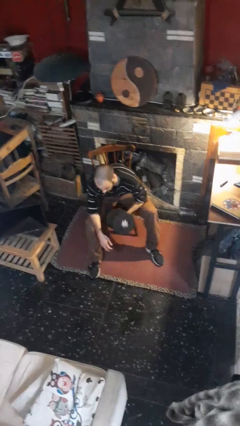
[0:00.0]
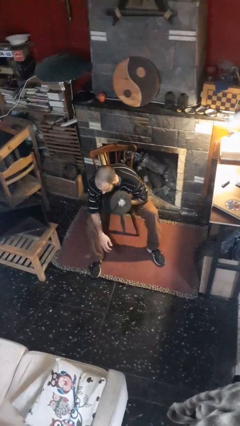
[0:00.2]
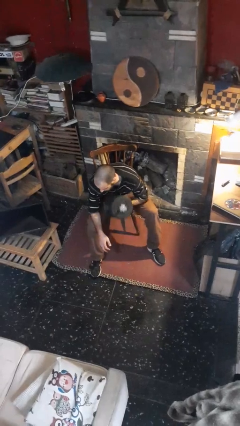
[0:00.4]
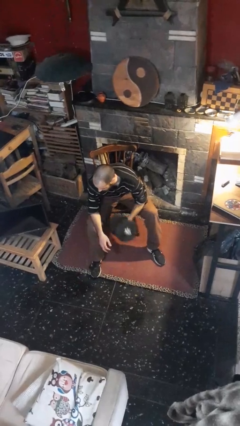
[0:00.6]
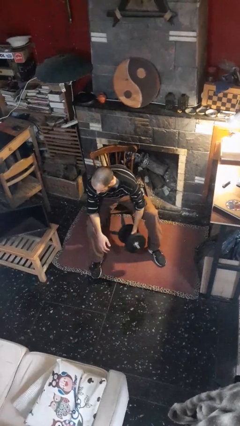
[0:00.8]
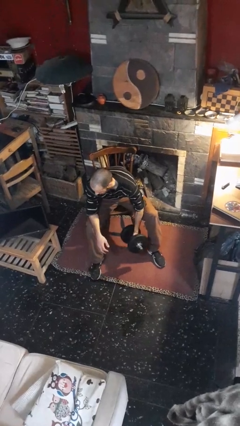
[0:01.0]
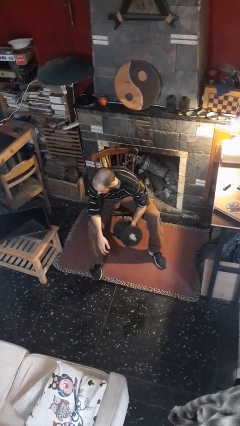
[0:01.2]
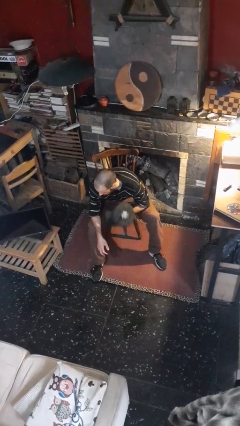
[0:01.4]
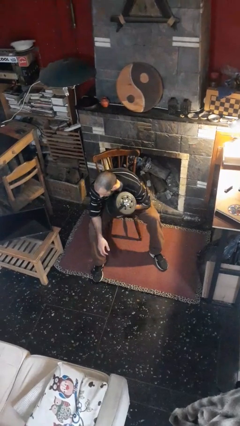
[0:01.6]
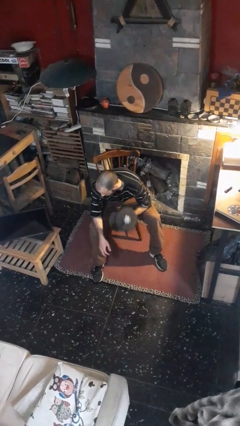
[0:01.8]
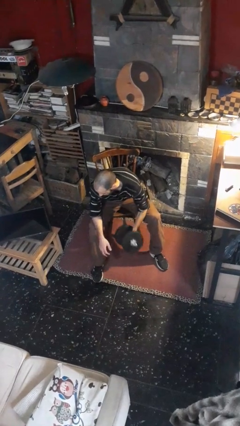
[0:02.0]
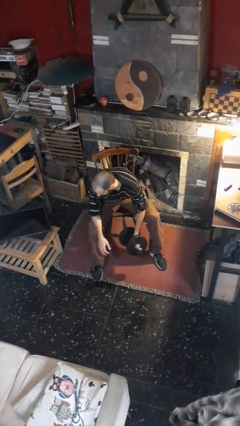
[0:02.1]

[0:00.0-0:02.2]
person lifts dumbbells

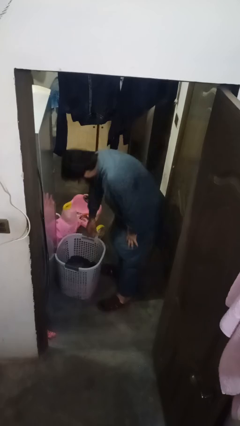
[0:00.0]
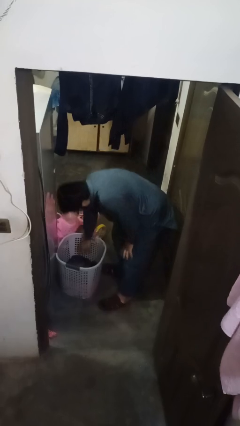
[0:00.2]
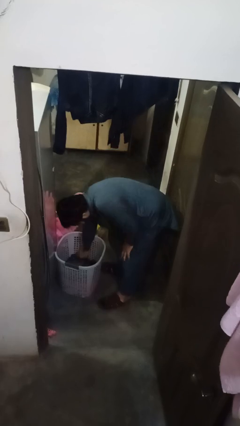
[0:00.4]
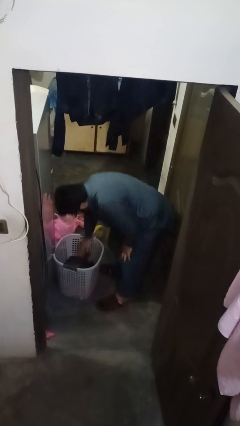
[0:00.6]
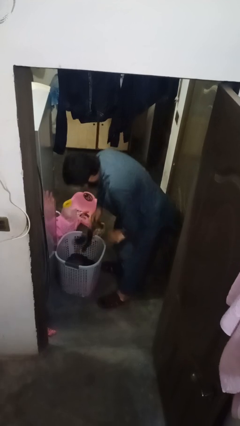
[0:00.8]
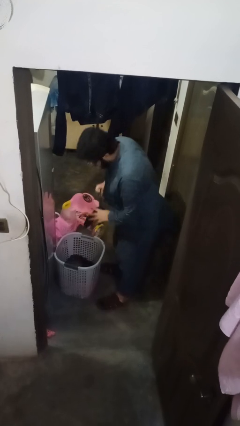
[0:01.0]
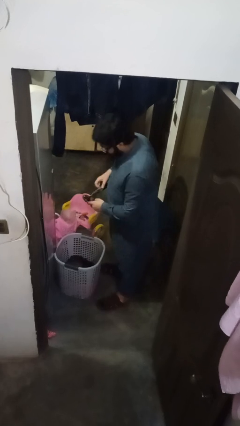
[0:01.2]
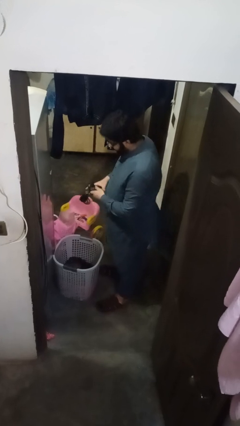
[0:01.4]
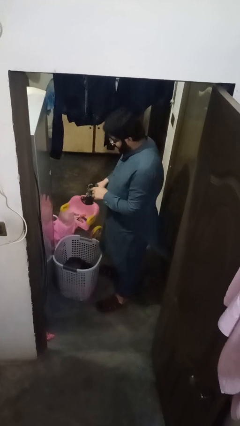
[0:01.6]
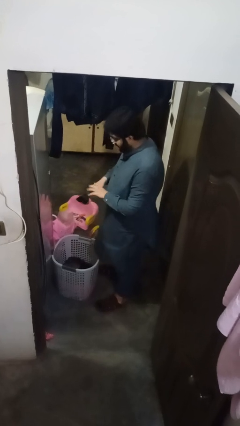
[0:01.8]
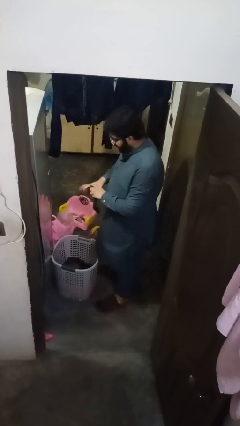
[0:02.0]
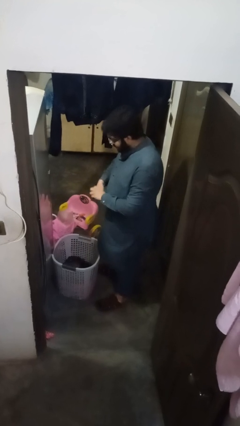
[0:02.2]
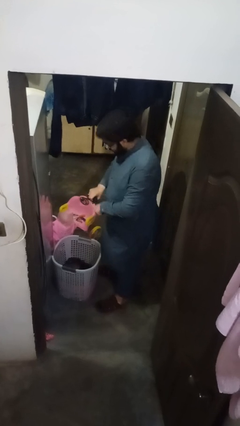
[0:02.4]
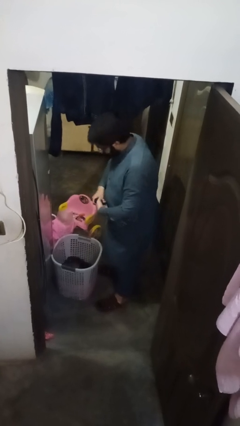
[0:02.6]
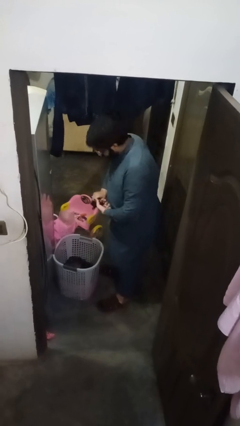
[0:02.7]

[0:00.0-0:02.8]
person folds socks

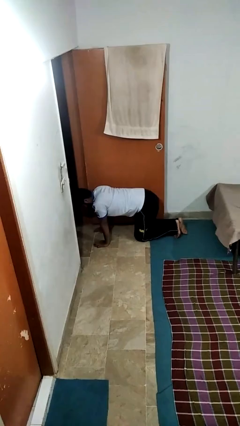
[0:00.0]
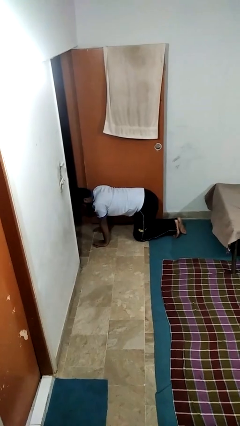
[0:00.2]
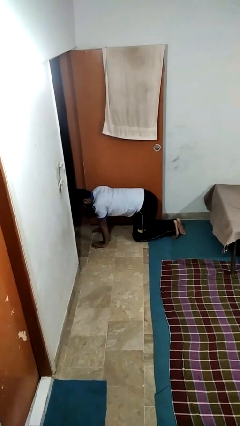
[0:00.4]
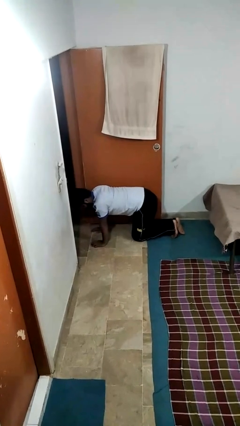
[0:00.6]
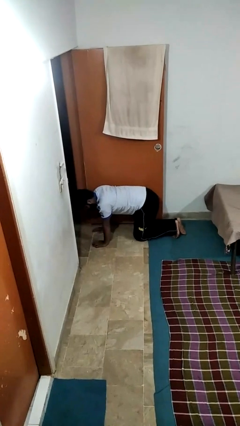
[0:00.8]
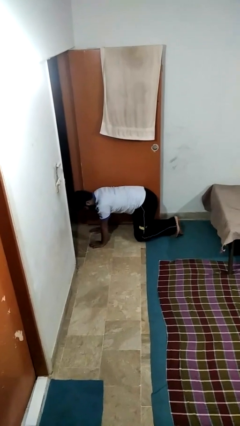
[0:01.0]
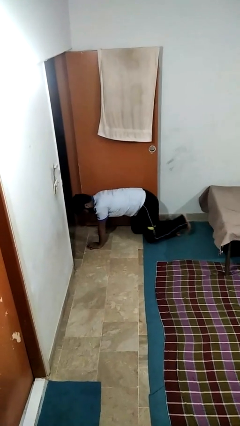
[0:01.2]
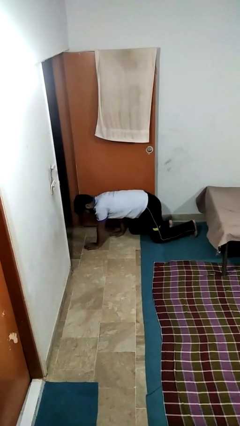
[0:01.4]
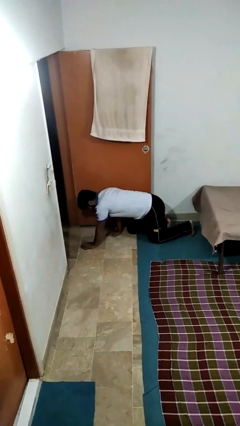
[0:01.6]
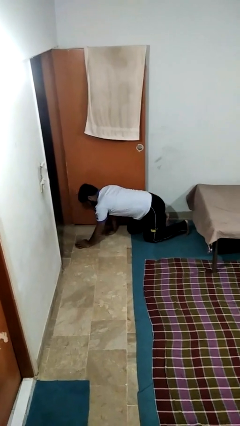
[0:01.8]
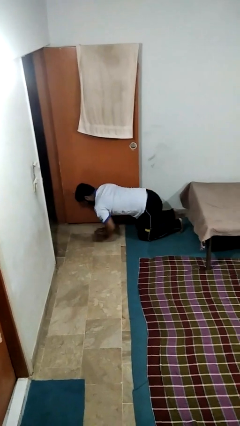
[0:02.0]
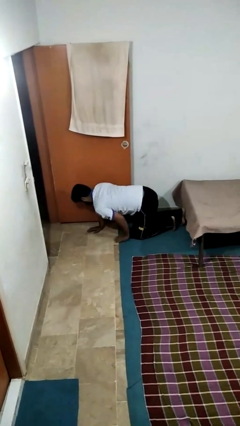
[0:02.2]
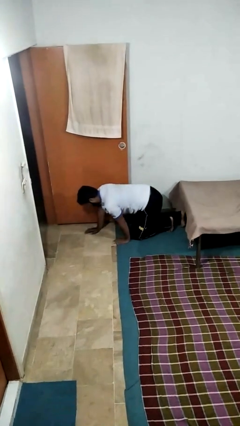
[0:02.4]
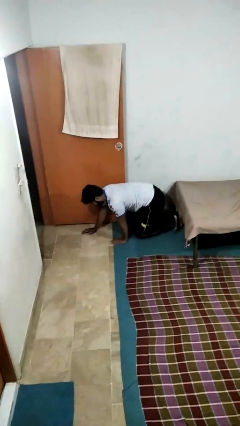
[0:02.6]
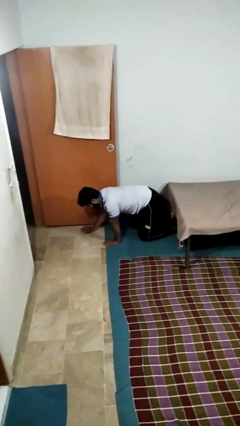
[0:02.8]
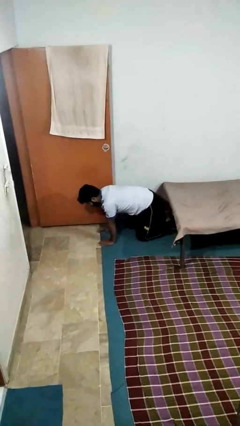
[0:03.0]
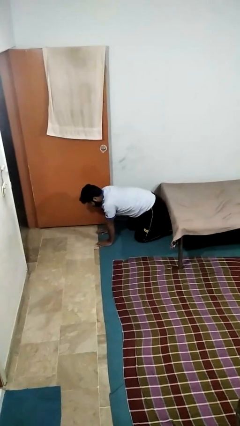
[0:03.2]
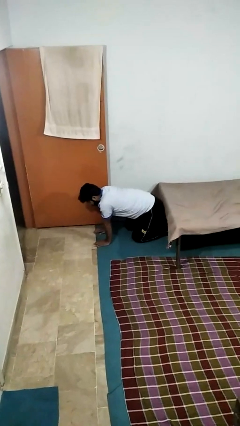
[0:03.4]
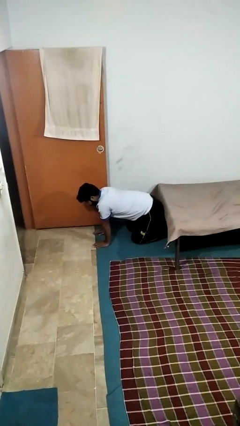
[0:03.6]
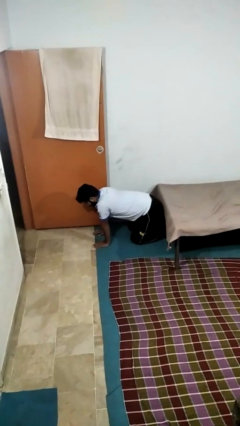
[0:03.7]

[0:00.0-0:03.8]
person crawls

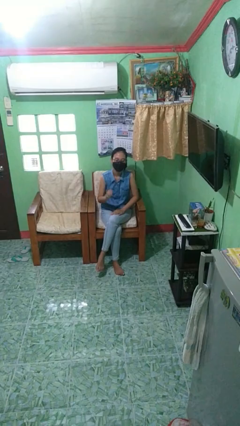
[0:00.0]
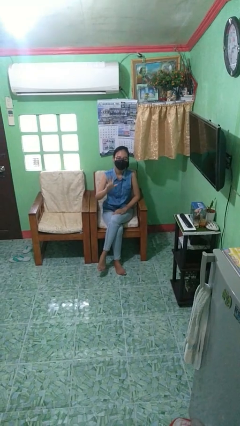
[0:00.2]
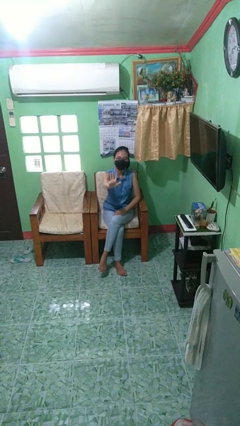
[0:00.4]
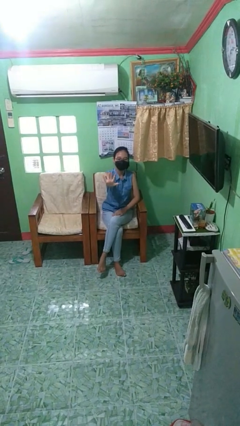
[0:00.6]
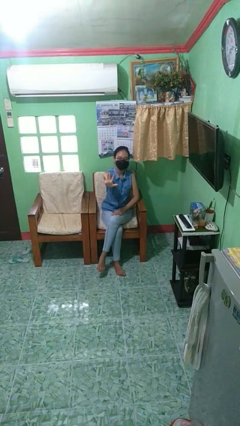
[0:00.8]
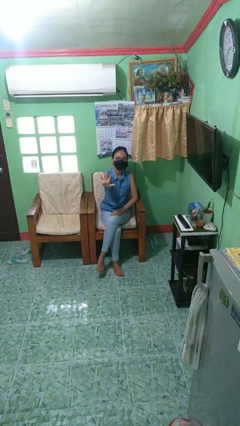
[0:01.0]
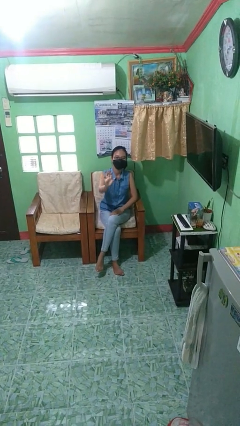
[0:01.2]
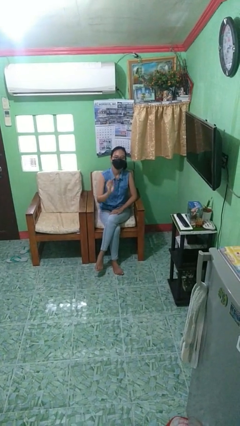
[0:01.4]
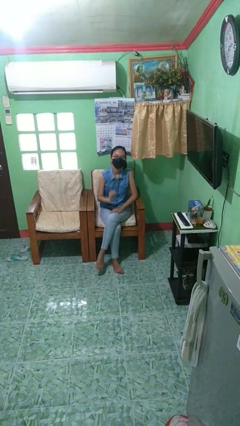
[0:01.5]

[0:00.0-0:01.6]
person gestures stop

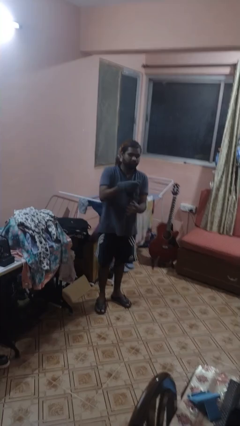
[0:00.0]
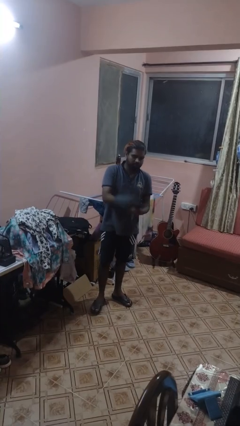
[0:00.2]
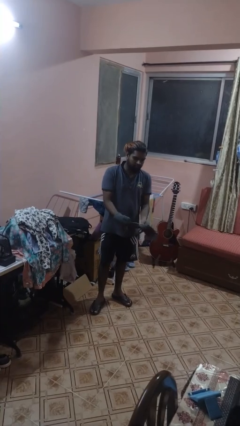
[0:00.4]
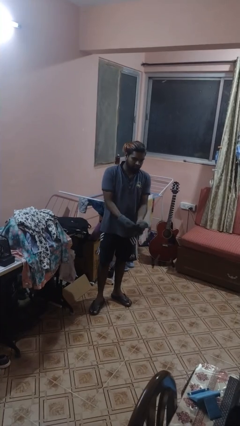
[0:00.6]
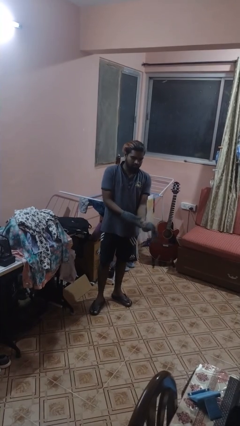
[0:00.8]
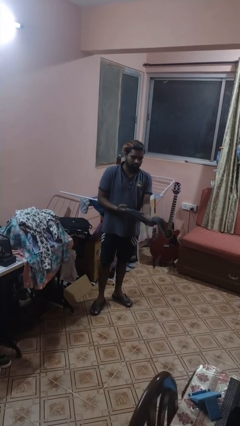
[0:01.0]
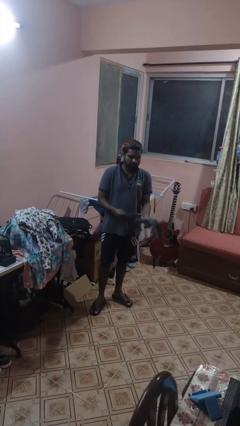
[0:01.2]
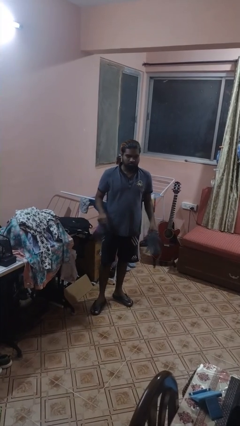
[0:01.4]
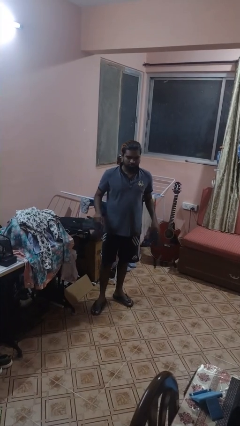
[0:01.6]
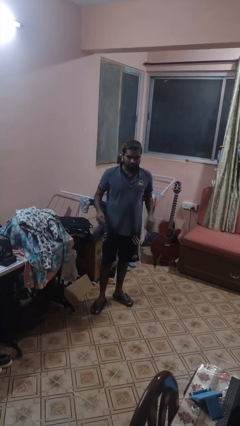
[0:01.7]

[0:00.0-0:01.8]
person takes off gloves

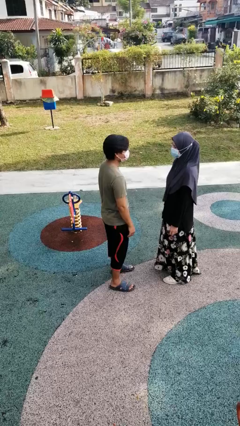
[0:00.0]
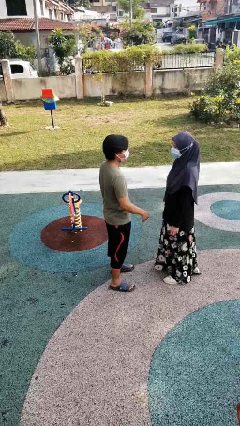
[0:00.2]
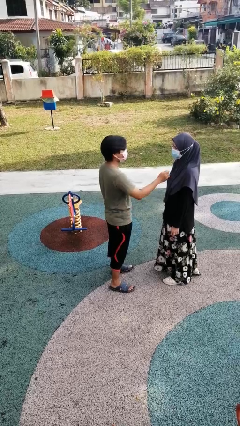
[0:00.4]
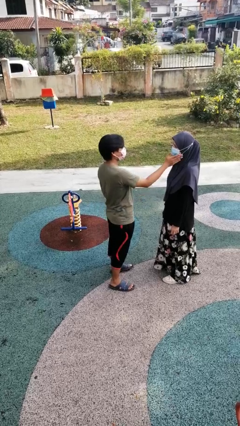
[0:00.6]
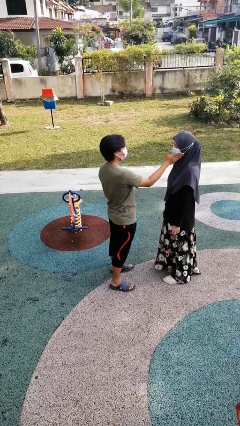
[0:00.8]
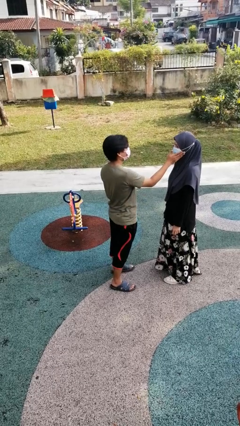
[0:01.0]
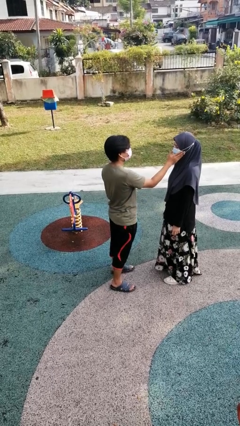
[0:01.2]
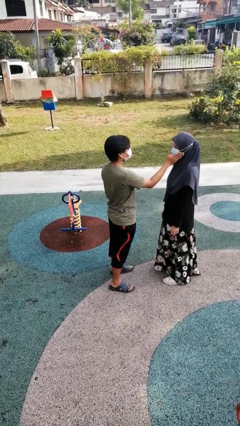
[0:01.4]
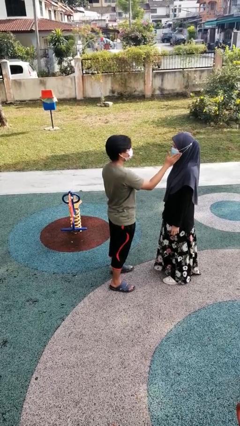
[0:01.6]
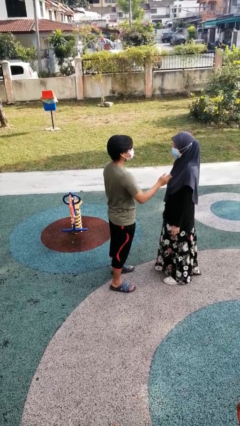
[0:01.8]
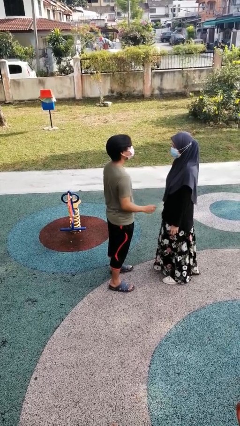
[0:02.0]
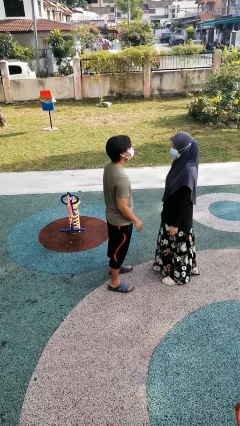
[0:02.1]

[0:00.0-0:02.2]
person touches face of person

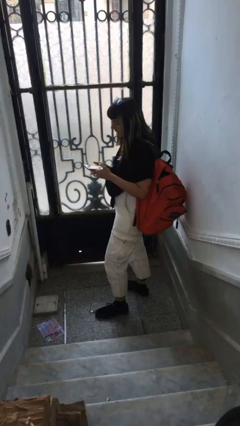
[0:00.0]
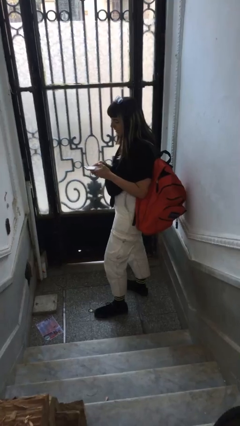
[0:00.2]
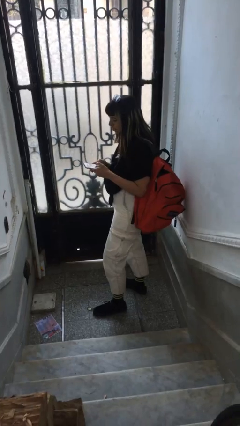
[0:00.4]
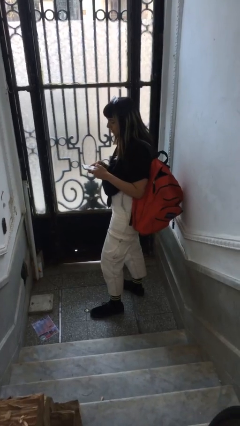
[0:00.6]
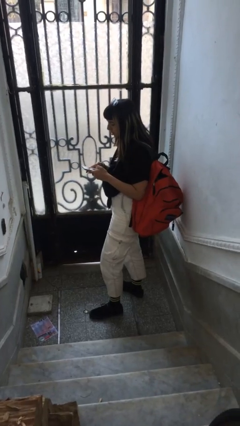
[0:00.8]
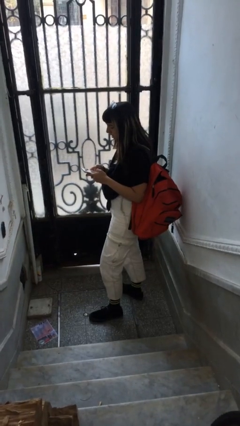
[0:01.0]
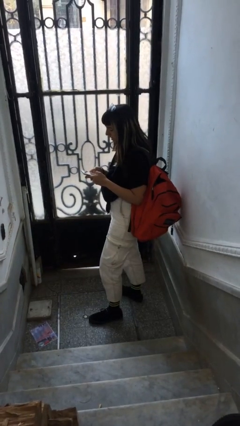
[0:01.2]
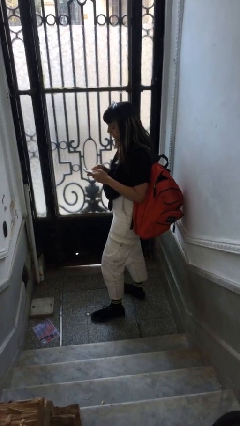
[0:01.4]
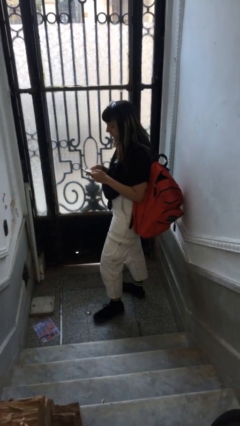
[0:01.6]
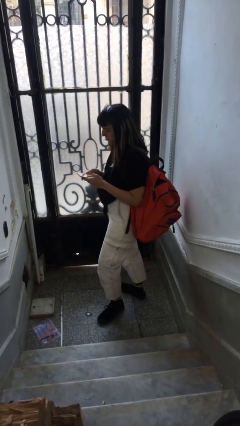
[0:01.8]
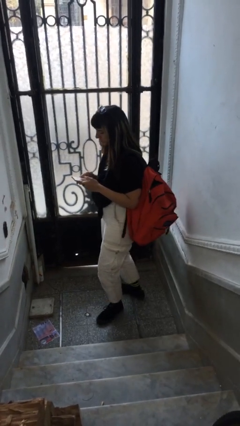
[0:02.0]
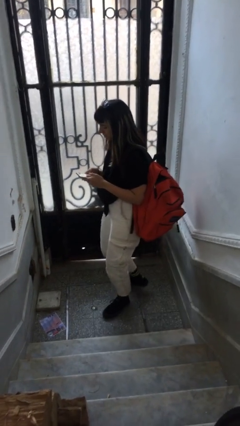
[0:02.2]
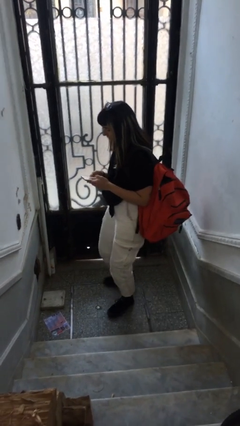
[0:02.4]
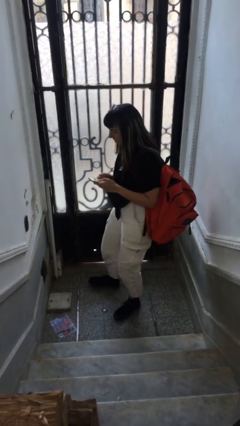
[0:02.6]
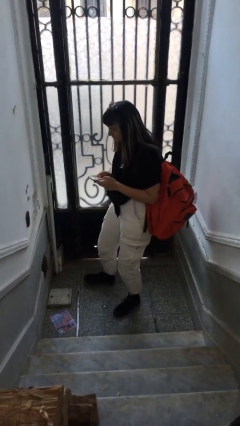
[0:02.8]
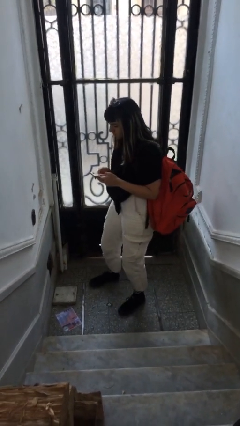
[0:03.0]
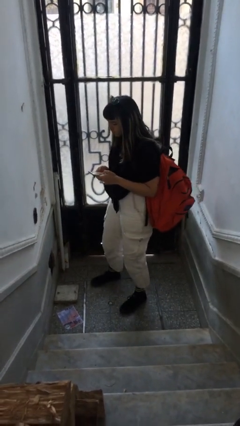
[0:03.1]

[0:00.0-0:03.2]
person texts on phone
